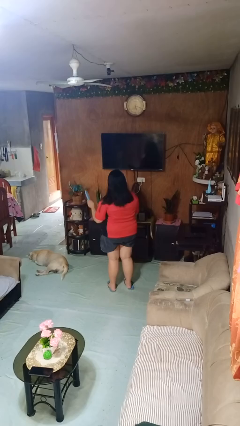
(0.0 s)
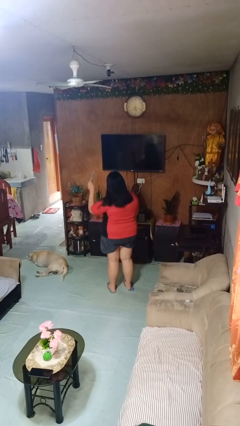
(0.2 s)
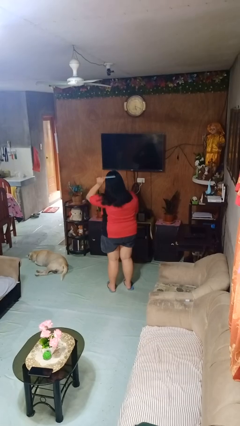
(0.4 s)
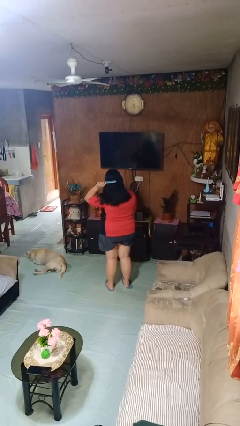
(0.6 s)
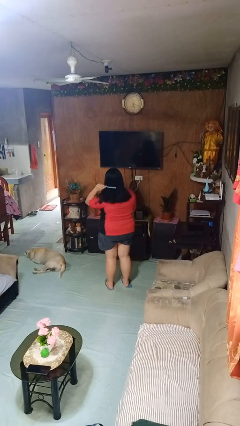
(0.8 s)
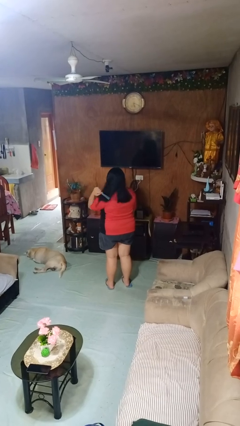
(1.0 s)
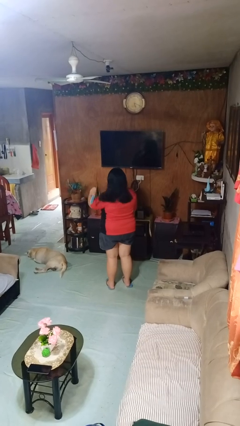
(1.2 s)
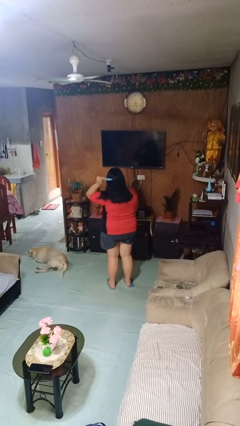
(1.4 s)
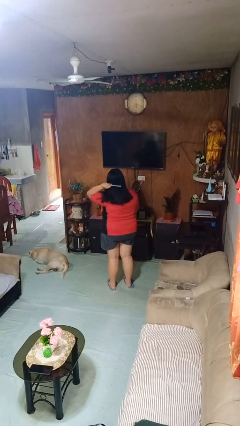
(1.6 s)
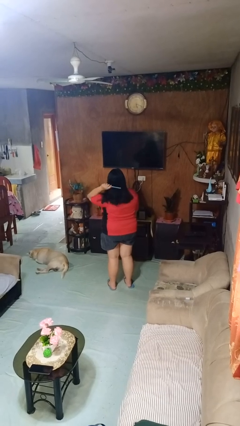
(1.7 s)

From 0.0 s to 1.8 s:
person brushes hair

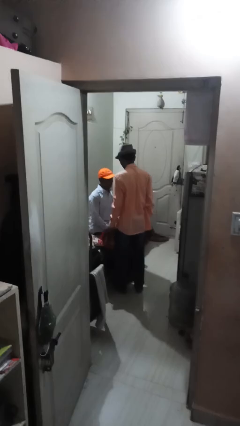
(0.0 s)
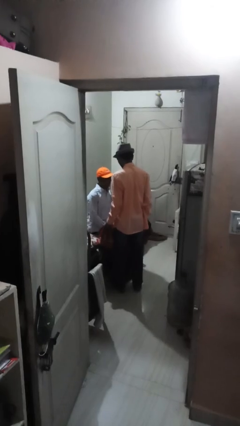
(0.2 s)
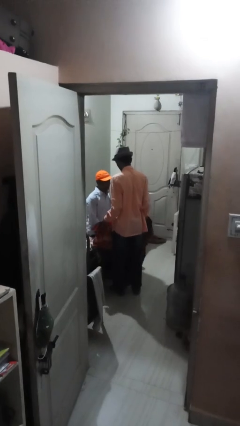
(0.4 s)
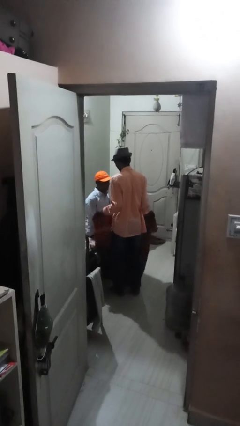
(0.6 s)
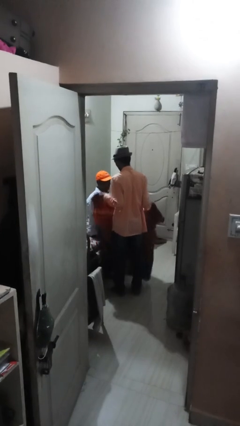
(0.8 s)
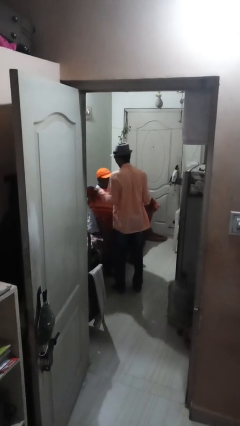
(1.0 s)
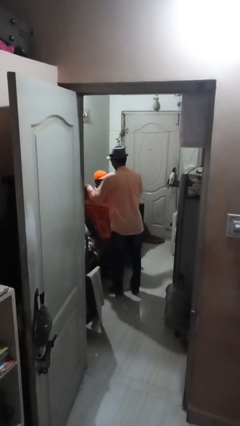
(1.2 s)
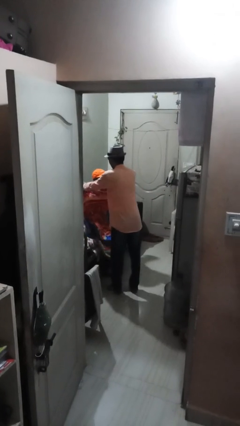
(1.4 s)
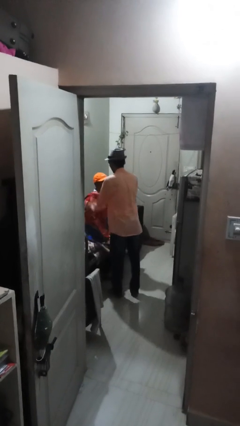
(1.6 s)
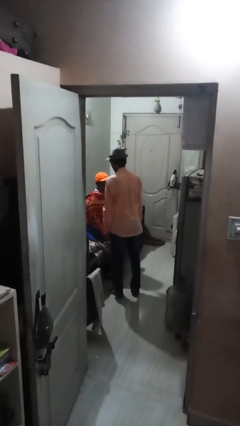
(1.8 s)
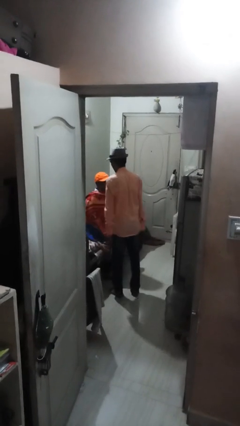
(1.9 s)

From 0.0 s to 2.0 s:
person uncovers friend with blanket

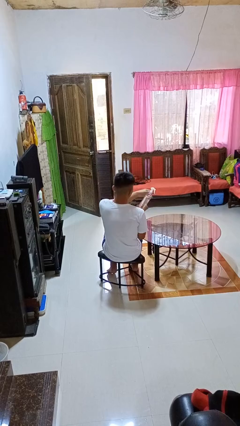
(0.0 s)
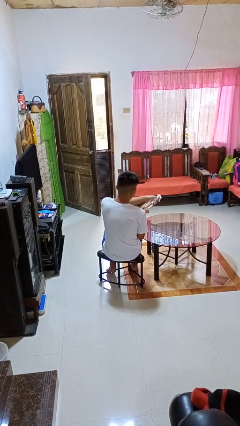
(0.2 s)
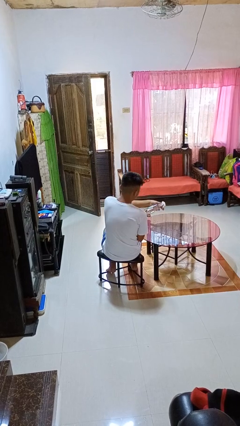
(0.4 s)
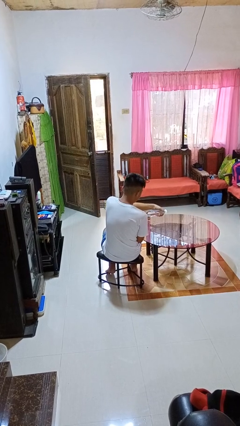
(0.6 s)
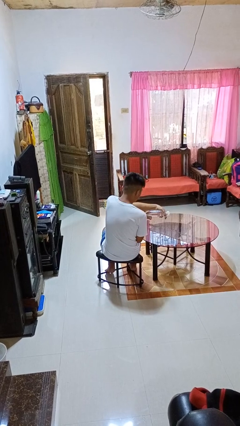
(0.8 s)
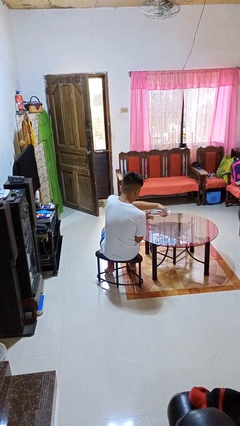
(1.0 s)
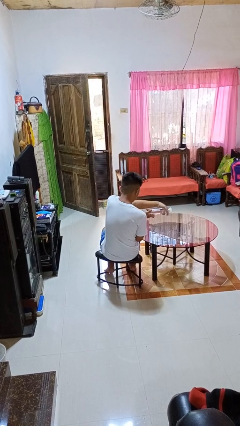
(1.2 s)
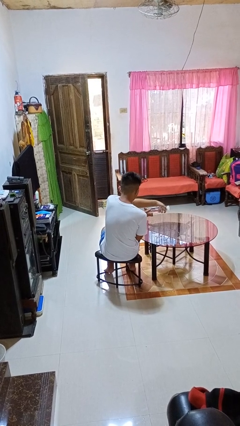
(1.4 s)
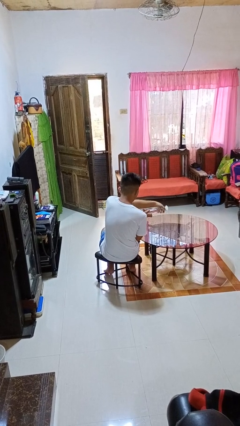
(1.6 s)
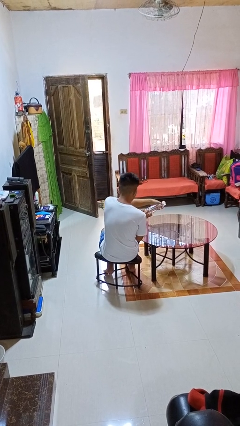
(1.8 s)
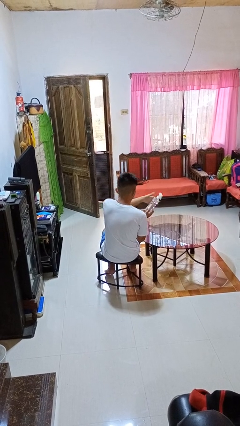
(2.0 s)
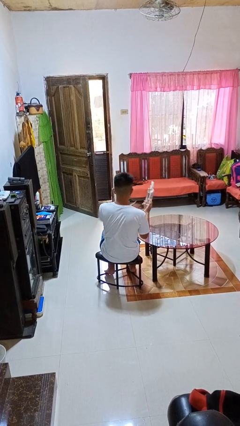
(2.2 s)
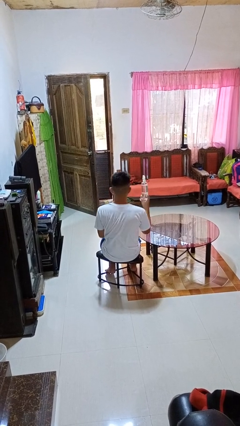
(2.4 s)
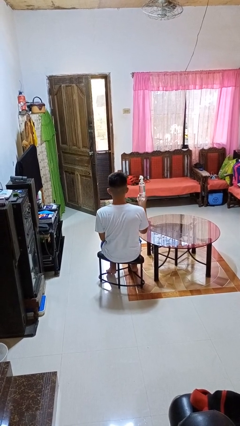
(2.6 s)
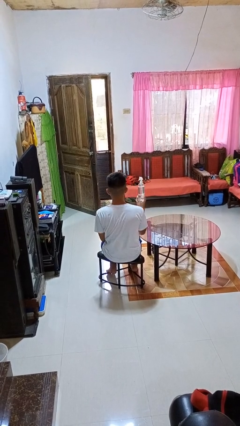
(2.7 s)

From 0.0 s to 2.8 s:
person sprays from bottle

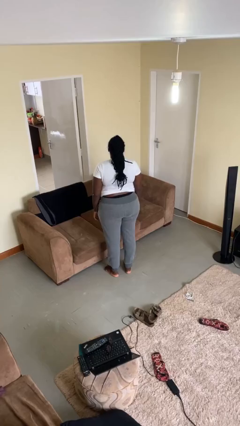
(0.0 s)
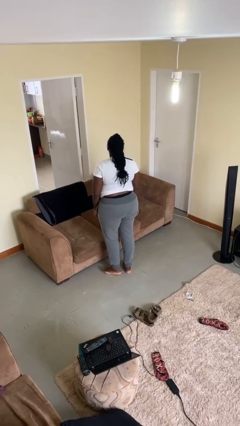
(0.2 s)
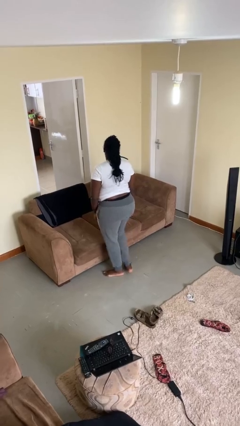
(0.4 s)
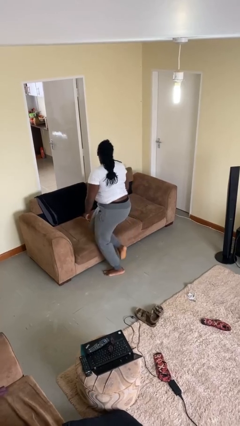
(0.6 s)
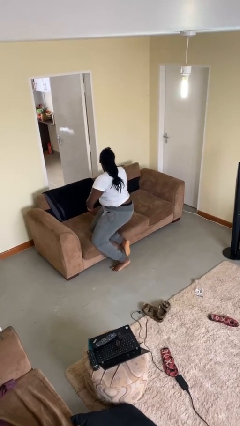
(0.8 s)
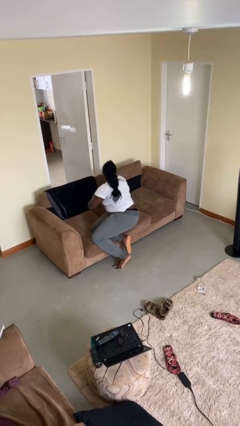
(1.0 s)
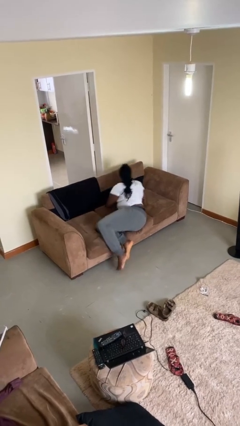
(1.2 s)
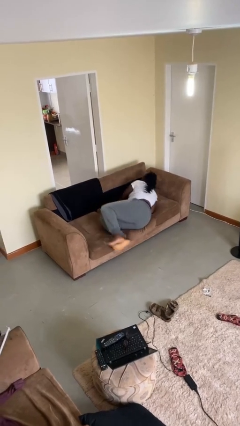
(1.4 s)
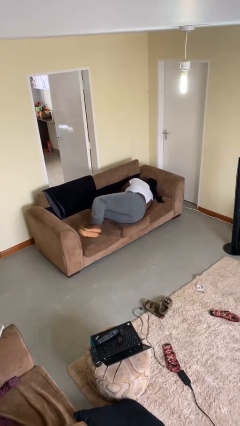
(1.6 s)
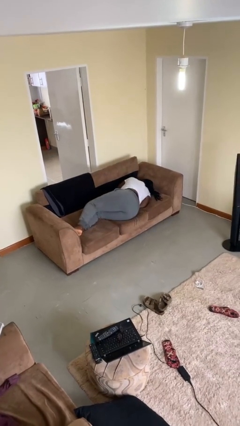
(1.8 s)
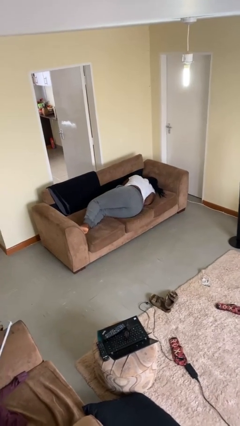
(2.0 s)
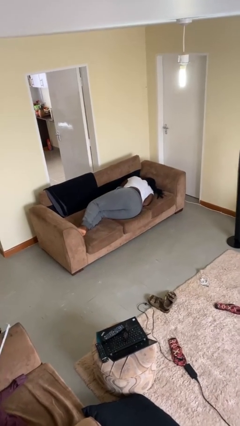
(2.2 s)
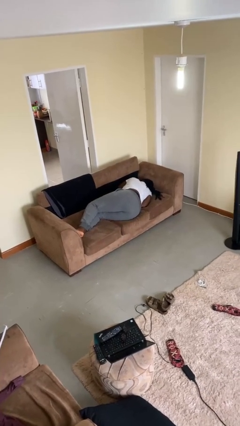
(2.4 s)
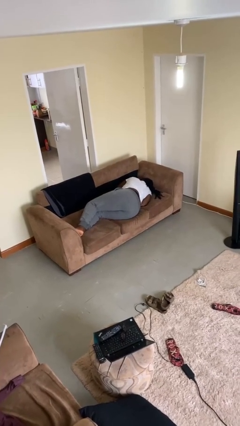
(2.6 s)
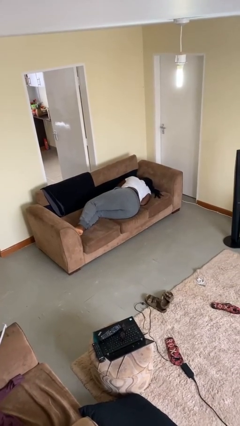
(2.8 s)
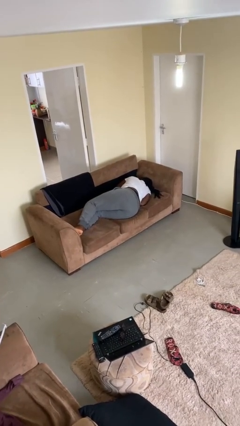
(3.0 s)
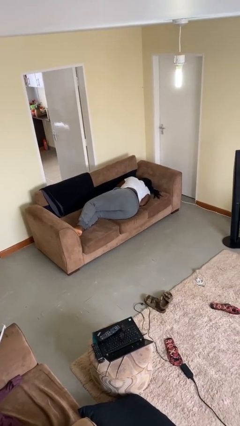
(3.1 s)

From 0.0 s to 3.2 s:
person lies down on couch

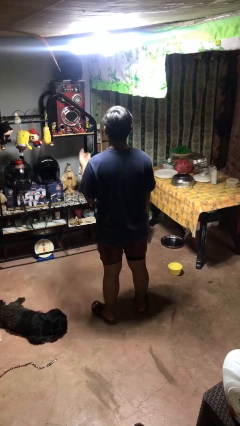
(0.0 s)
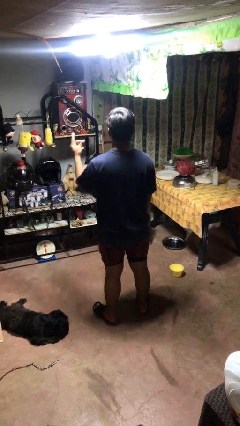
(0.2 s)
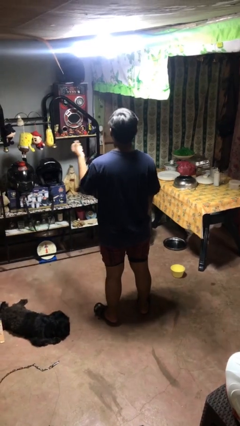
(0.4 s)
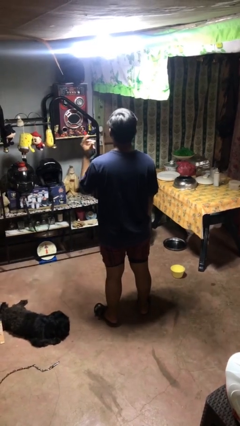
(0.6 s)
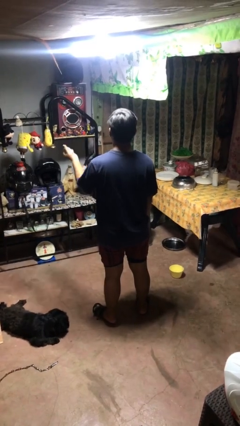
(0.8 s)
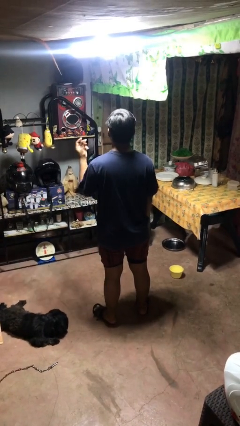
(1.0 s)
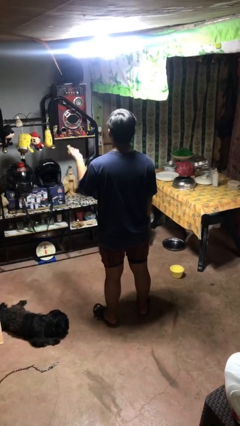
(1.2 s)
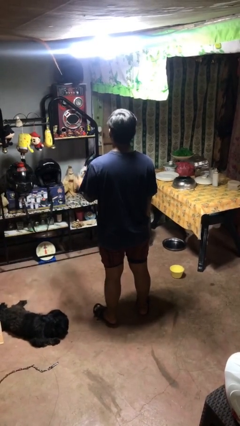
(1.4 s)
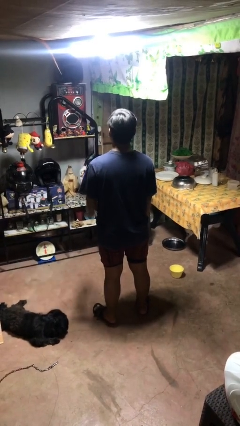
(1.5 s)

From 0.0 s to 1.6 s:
person snaps fingers

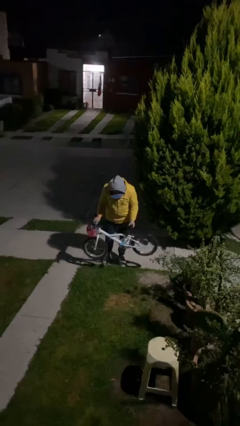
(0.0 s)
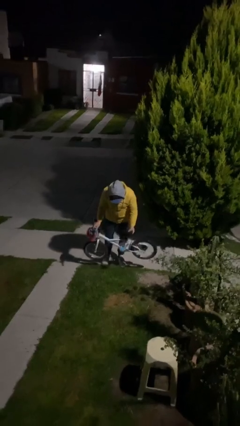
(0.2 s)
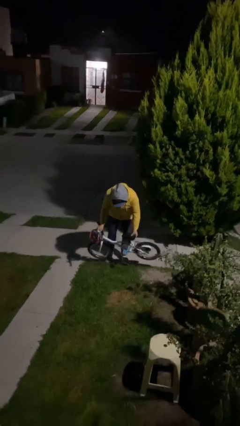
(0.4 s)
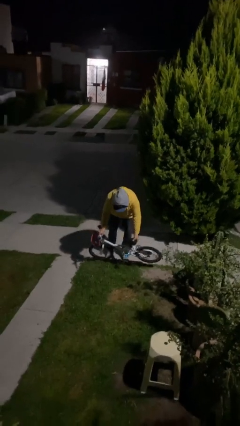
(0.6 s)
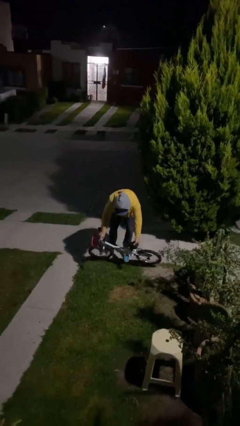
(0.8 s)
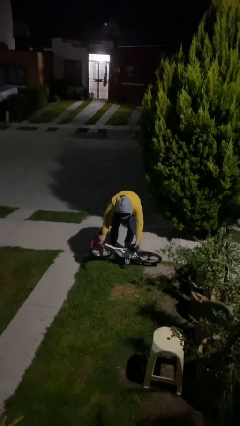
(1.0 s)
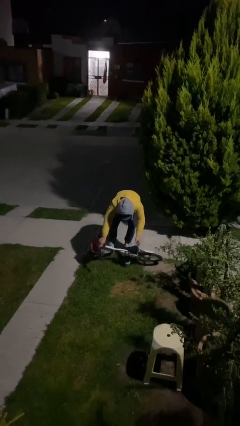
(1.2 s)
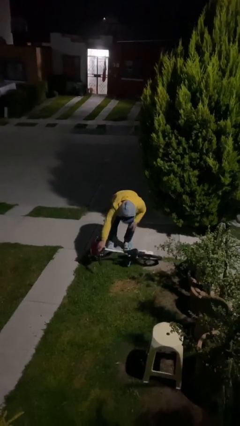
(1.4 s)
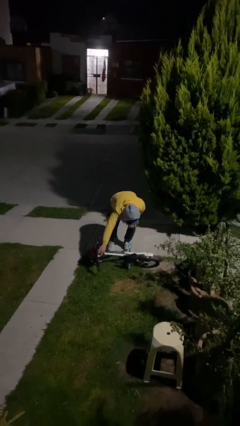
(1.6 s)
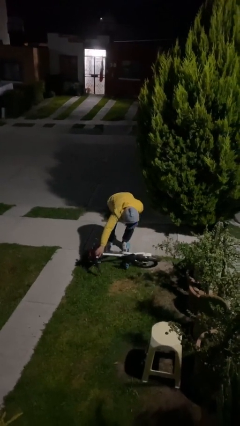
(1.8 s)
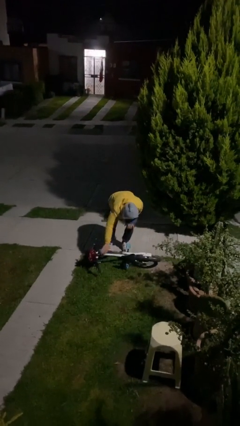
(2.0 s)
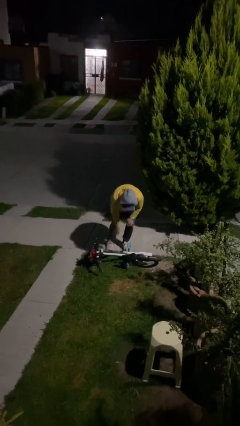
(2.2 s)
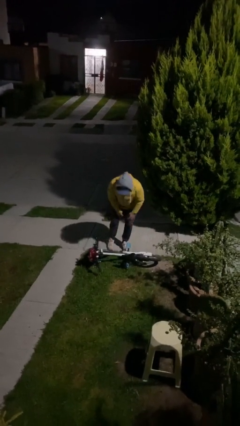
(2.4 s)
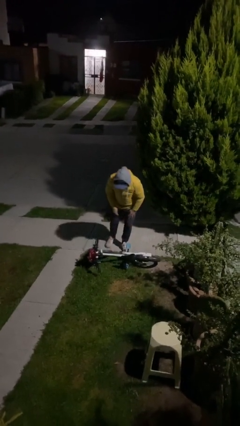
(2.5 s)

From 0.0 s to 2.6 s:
person puts down object on floor

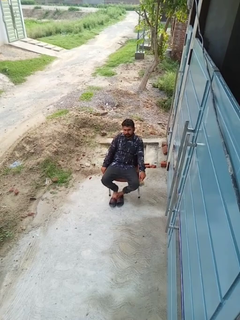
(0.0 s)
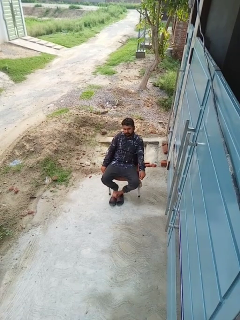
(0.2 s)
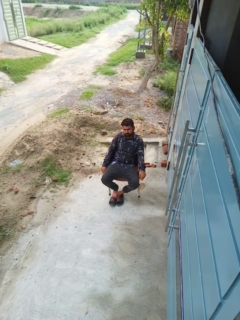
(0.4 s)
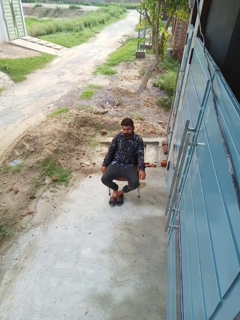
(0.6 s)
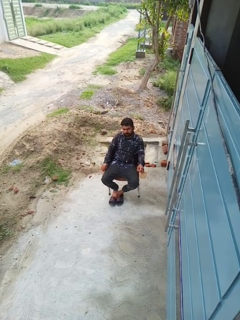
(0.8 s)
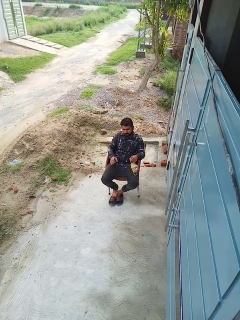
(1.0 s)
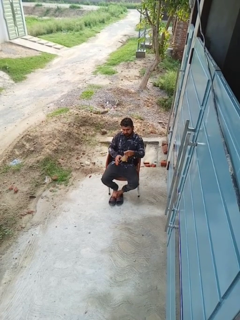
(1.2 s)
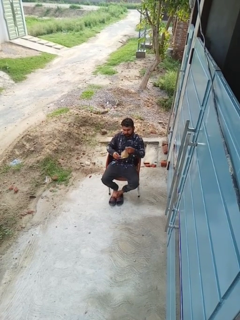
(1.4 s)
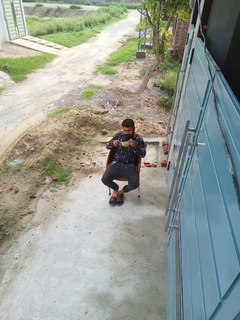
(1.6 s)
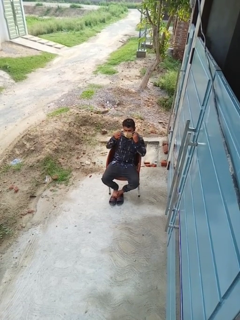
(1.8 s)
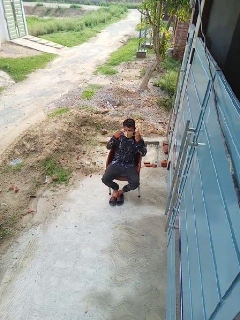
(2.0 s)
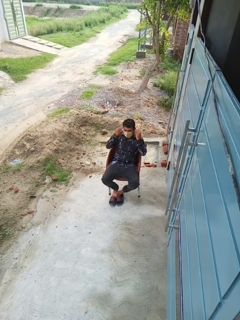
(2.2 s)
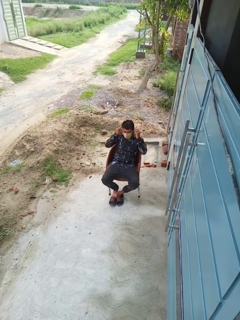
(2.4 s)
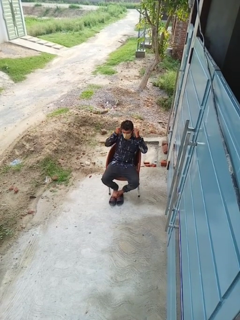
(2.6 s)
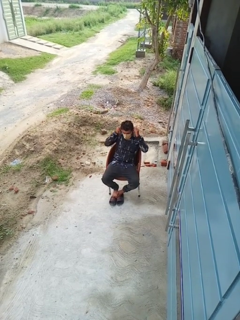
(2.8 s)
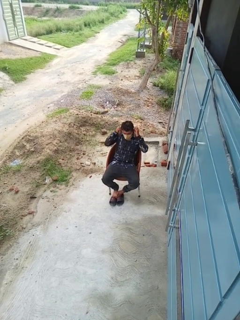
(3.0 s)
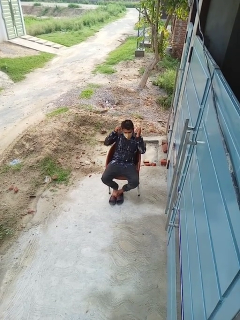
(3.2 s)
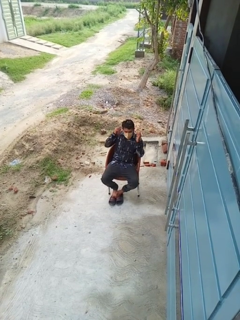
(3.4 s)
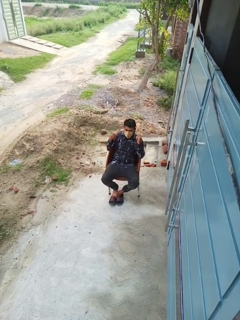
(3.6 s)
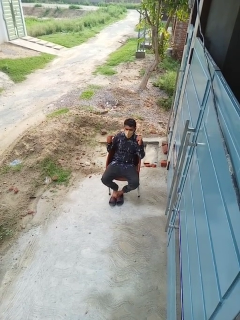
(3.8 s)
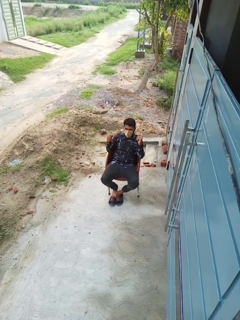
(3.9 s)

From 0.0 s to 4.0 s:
person puts on facemask
